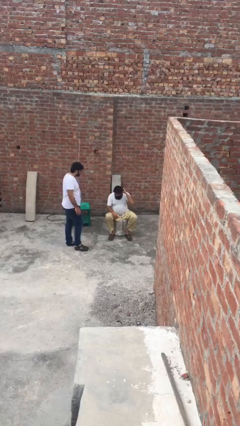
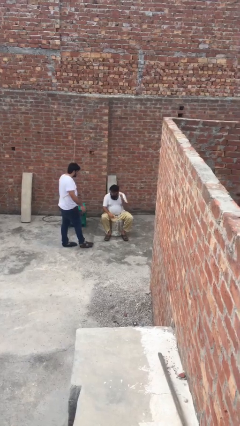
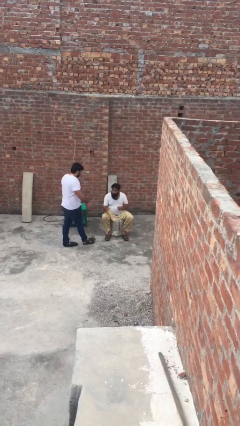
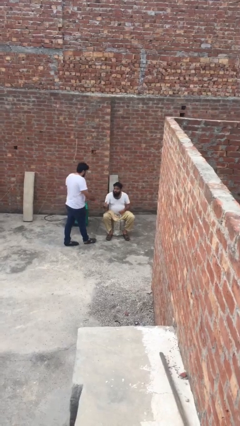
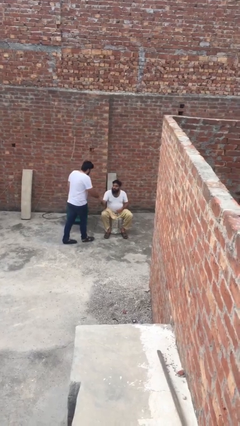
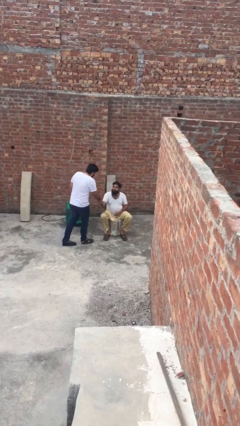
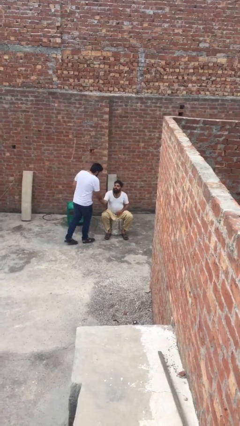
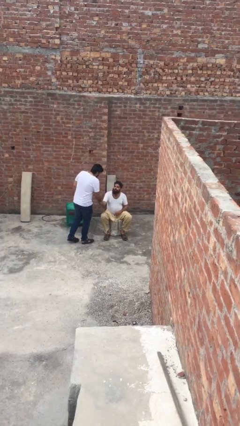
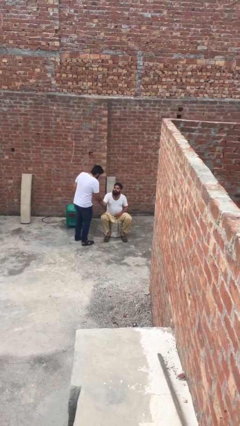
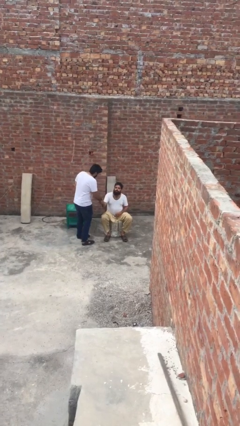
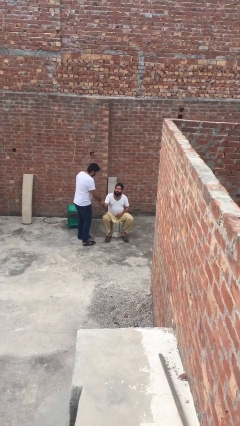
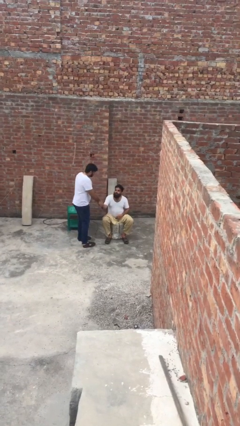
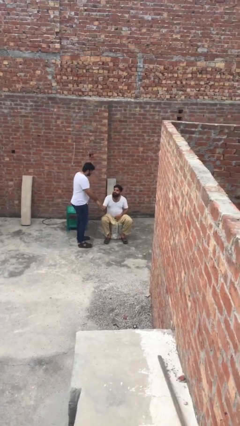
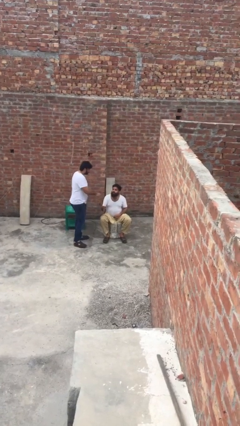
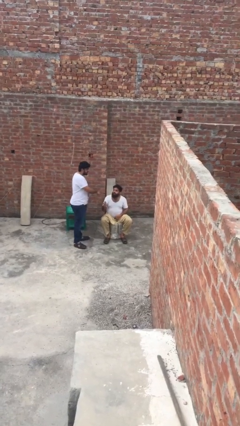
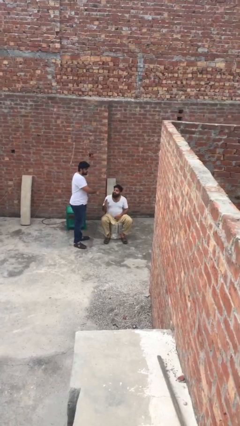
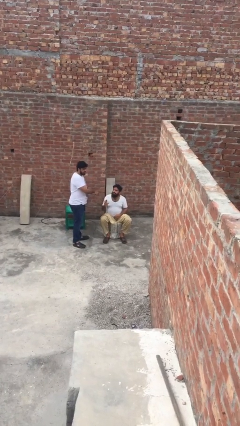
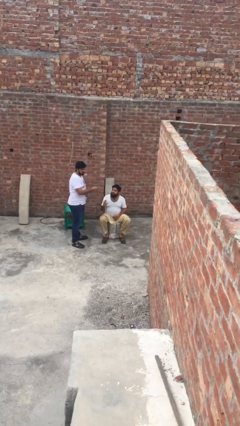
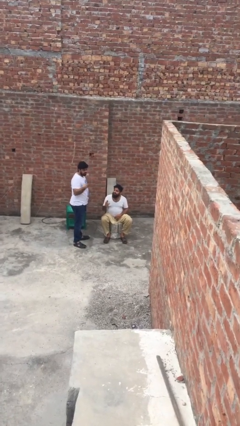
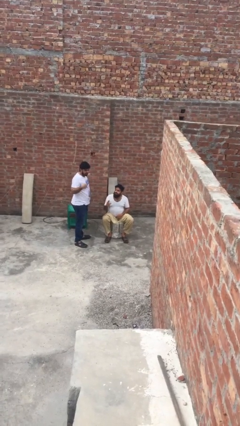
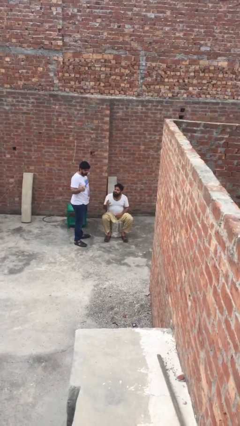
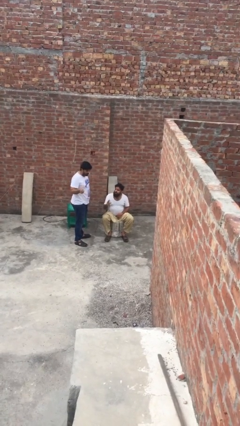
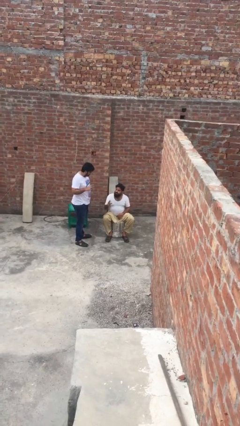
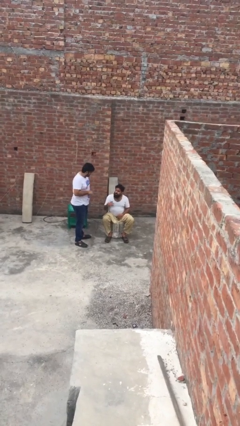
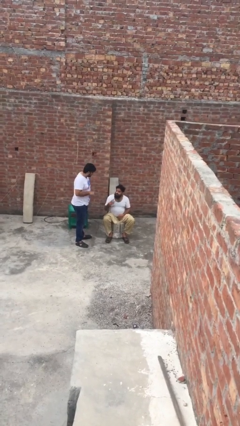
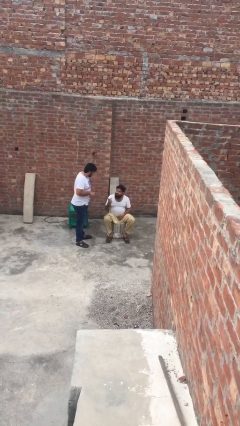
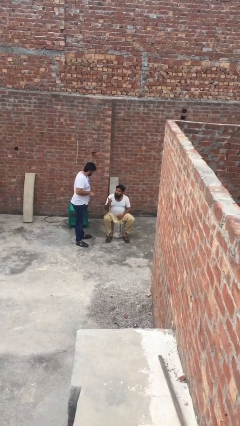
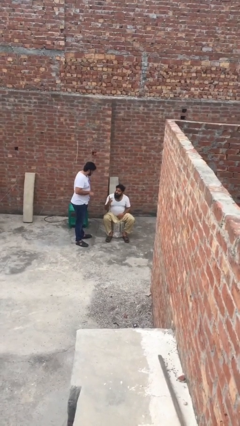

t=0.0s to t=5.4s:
person shakes hand

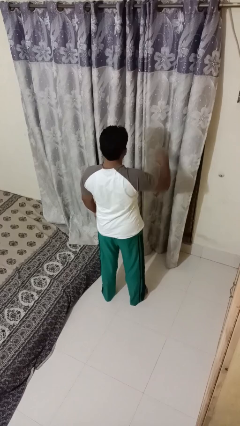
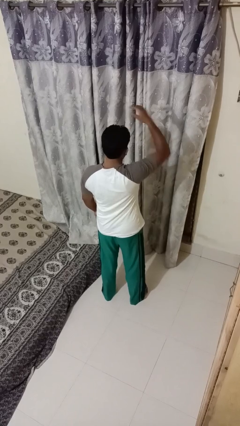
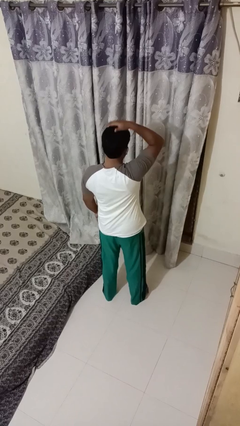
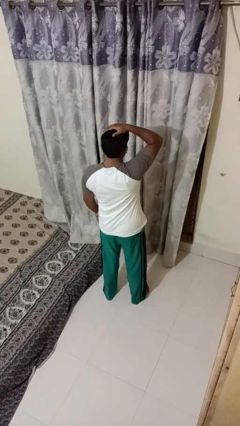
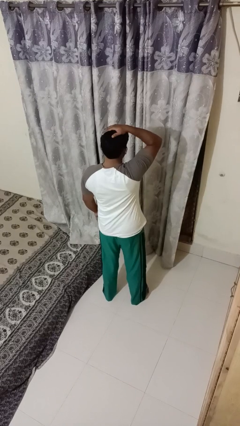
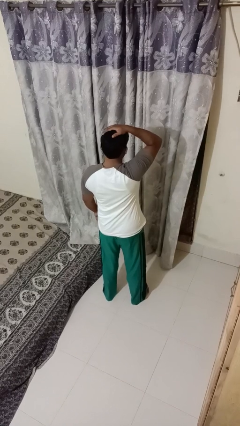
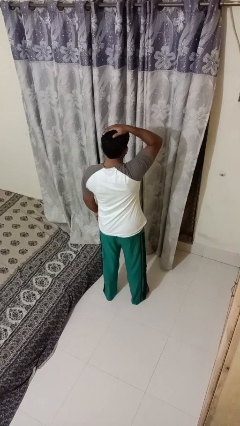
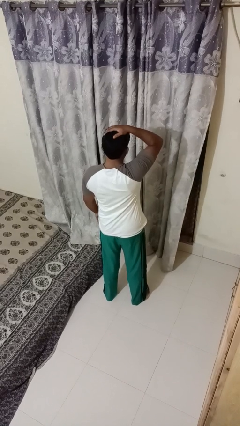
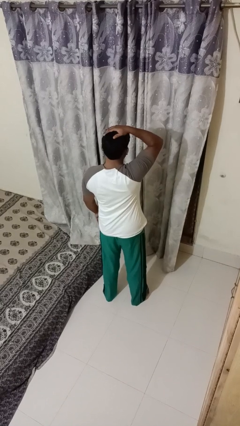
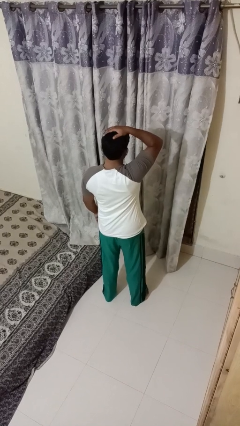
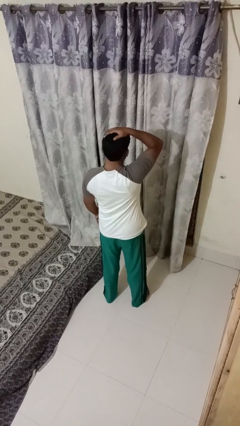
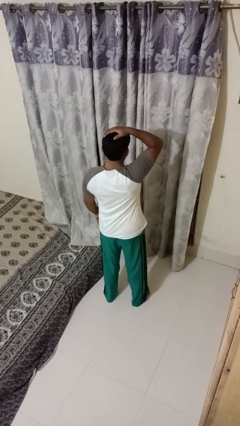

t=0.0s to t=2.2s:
person pats head

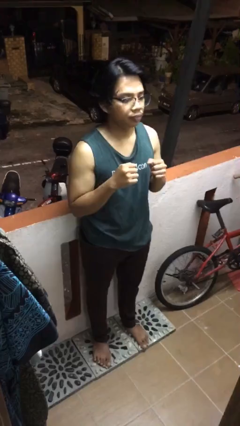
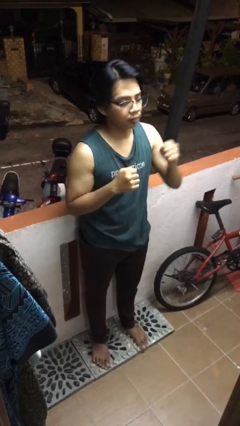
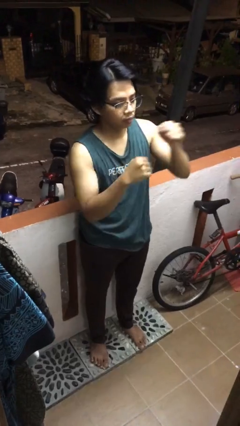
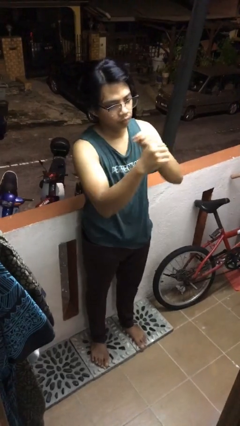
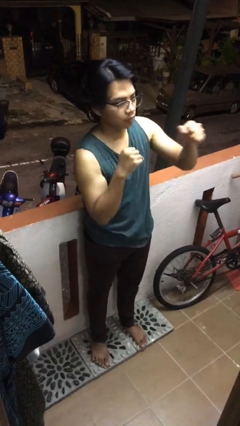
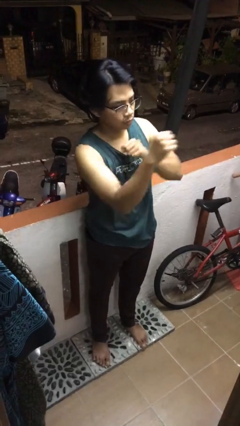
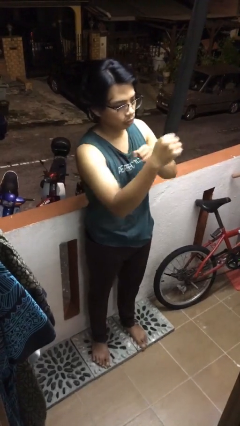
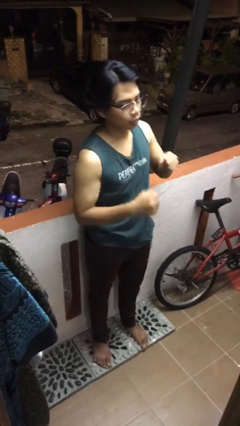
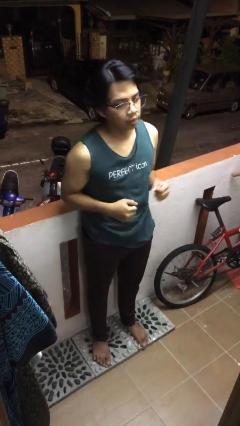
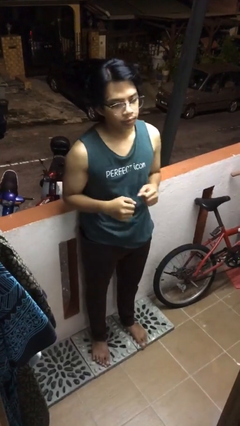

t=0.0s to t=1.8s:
person punches

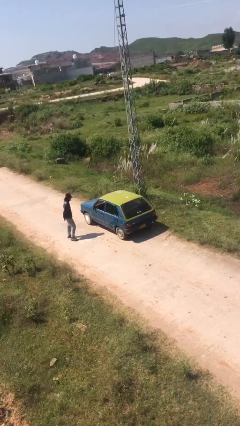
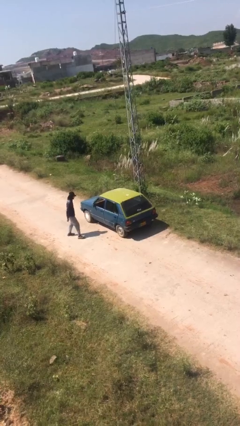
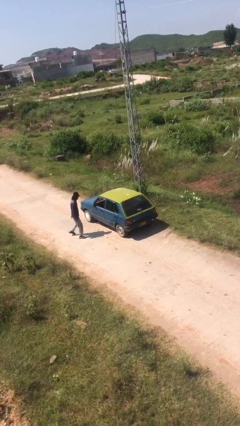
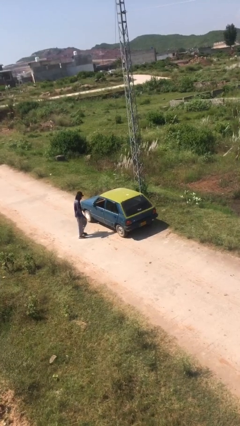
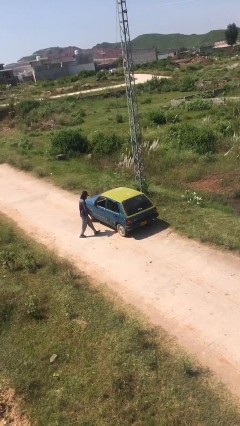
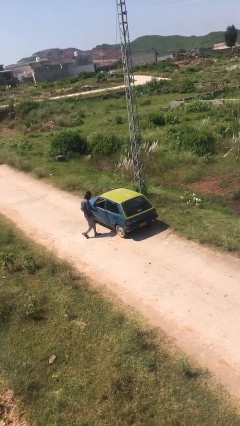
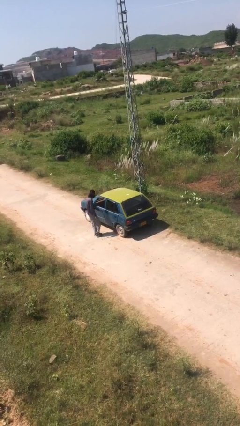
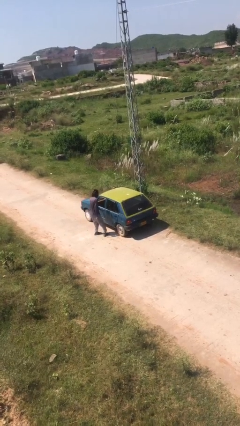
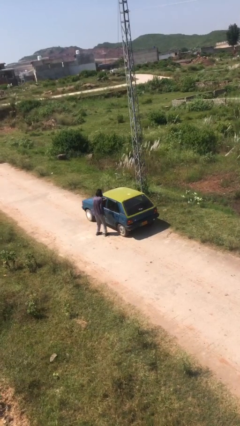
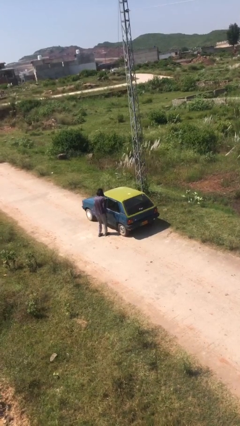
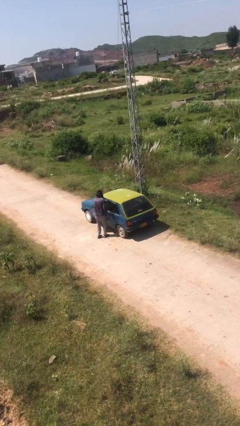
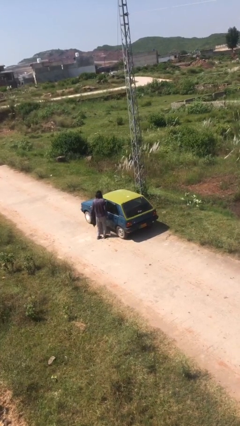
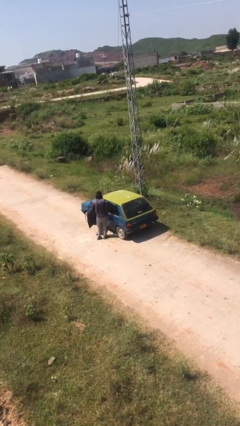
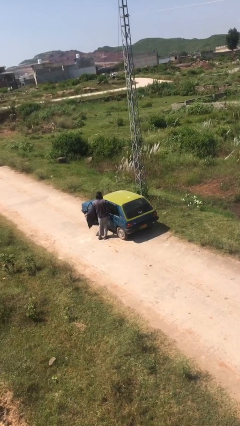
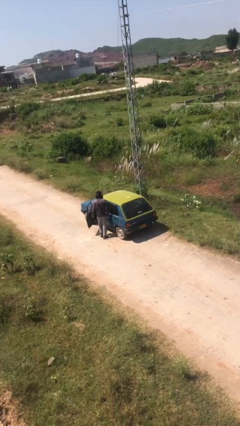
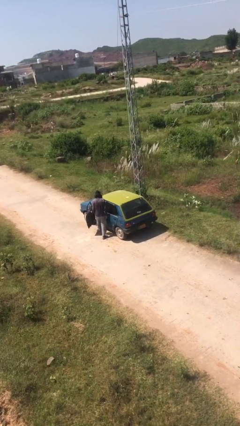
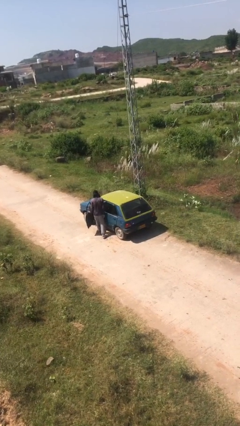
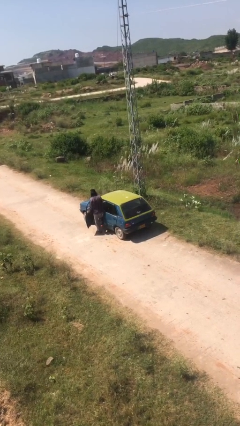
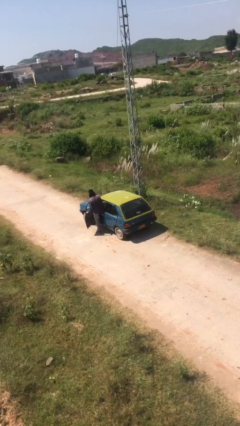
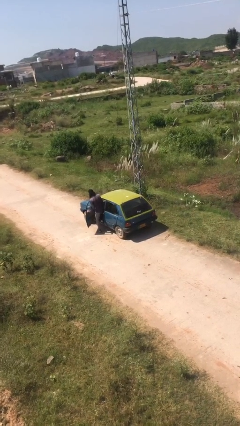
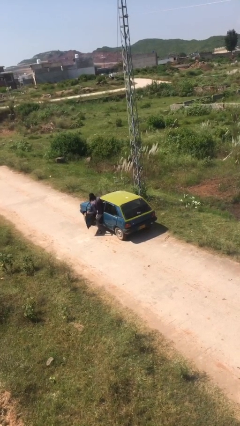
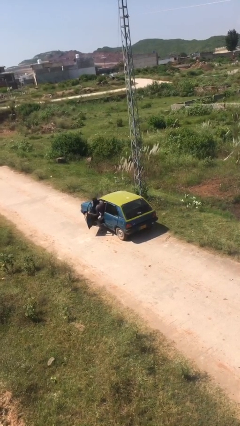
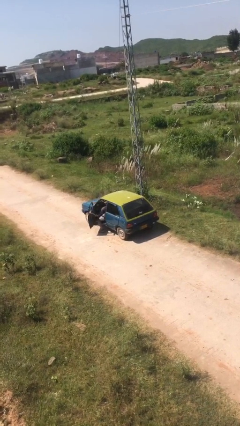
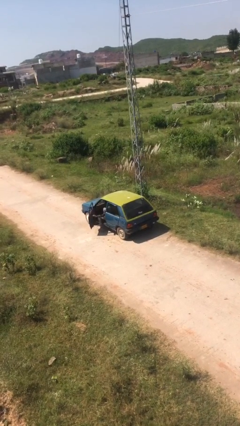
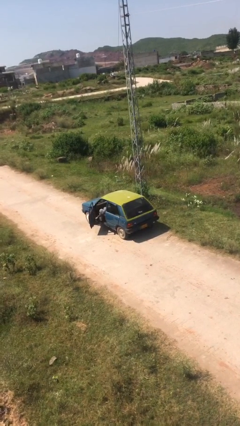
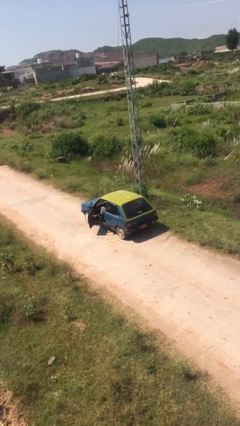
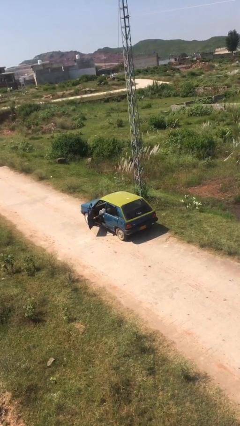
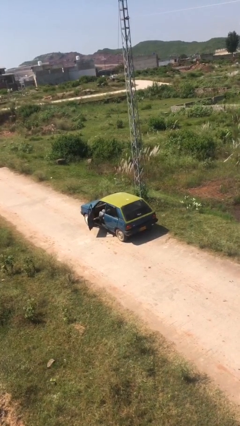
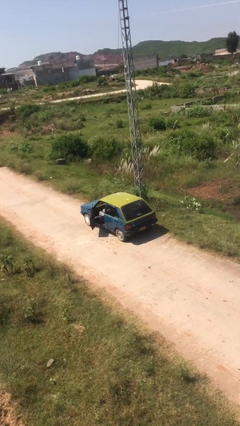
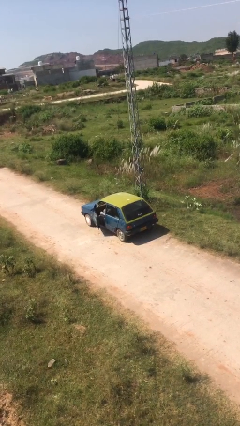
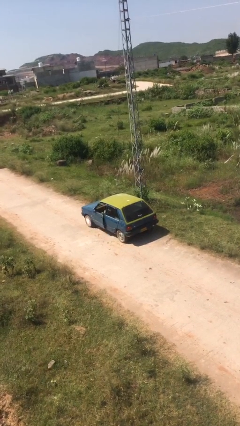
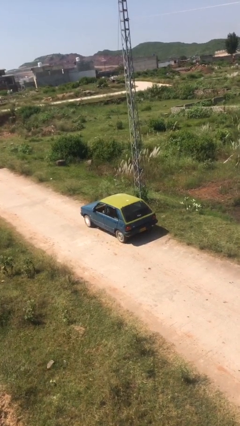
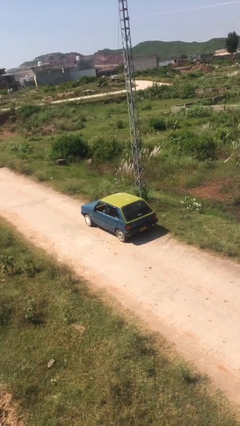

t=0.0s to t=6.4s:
car picks up person

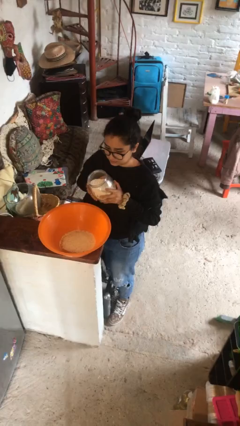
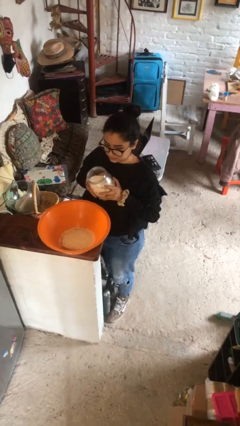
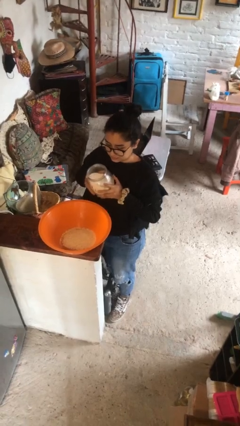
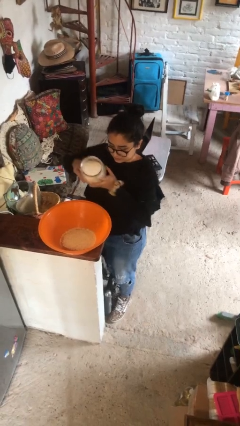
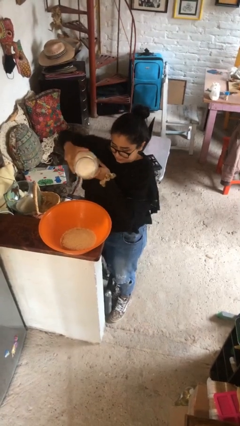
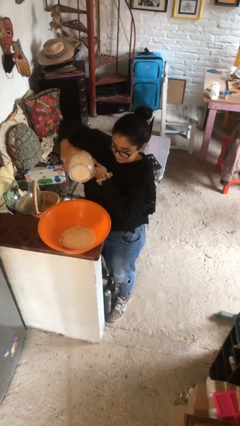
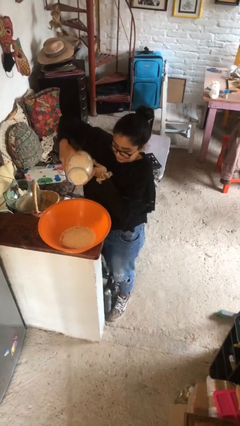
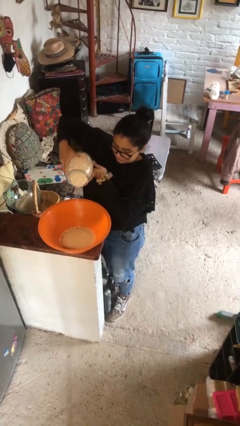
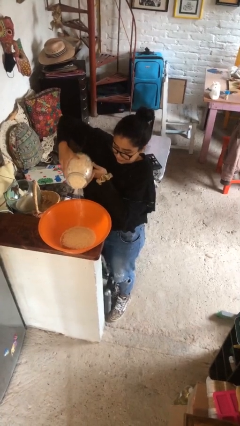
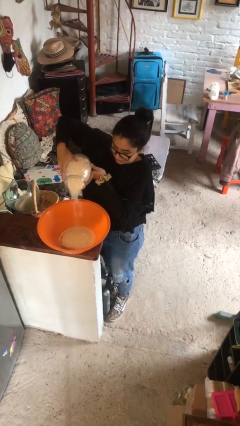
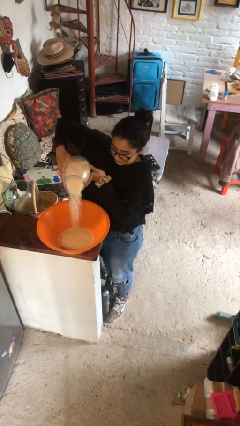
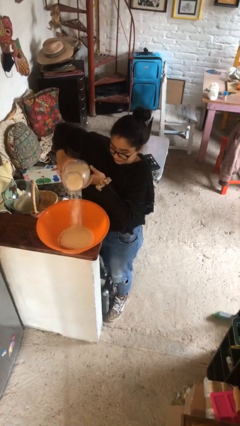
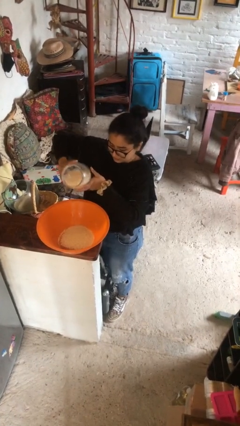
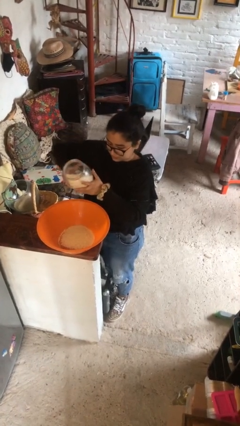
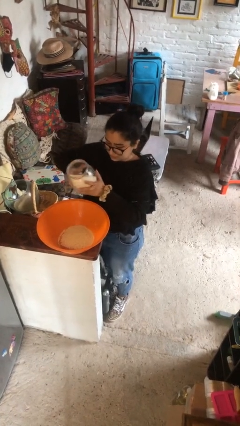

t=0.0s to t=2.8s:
person pours into bowl
